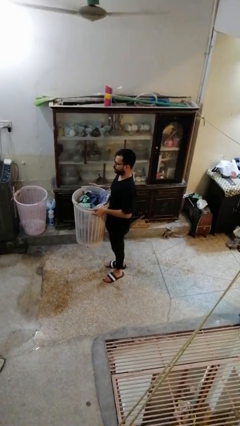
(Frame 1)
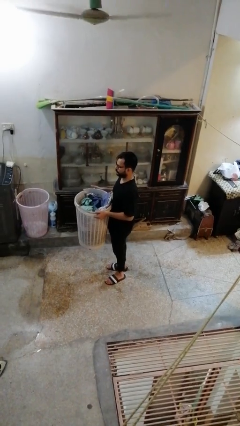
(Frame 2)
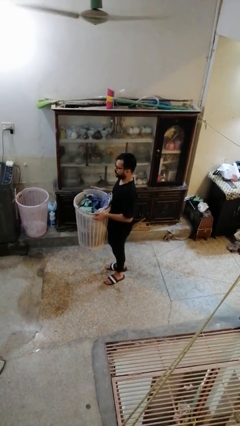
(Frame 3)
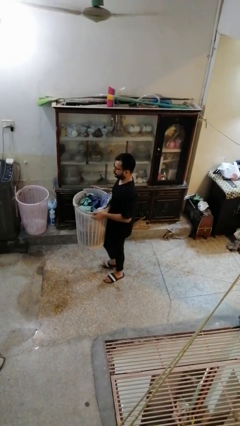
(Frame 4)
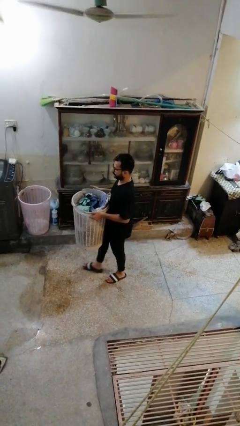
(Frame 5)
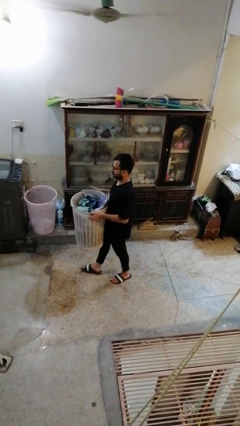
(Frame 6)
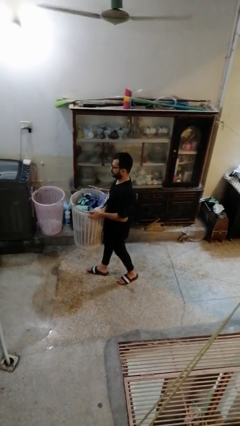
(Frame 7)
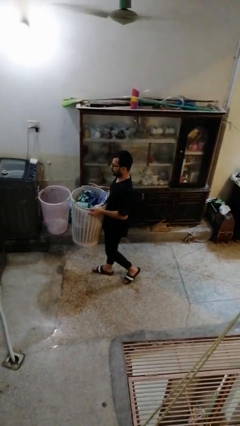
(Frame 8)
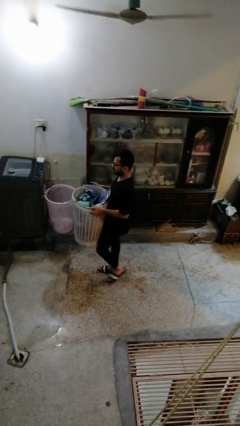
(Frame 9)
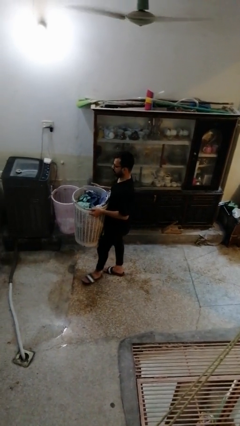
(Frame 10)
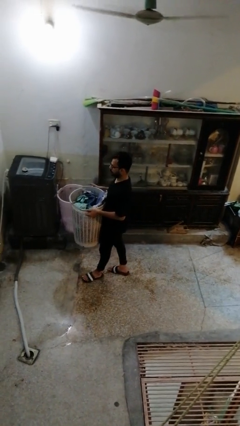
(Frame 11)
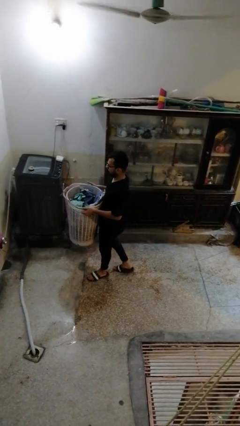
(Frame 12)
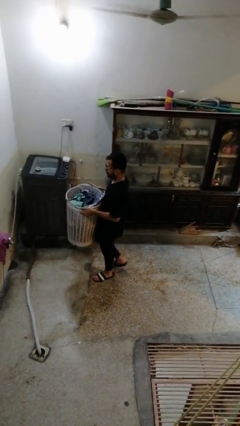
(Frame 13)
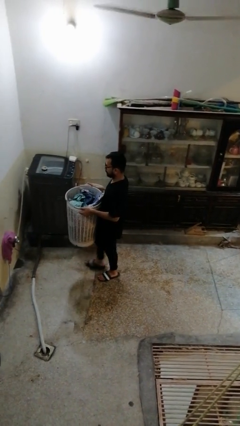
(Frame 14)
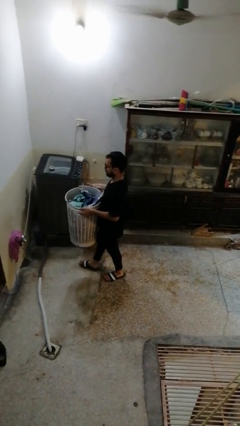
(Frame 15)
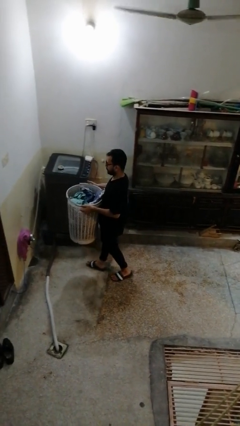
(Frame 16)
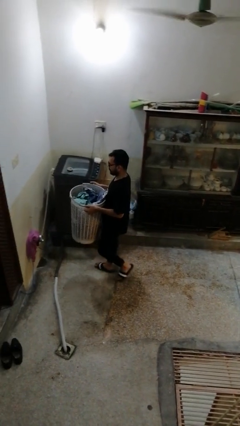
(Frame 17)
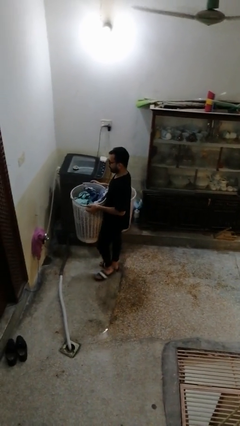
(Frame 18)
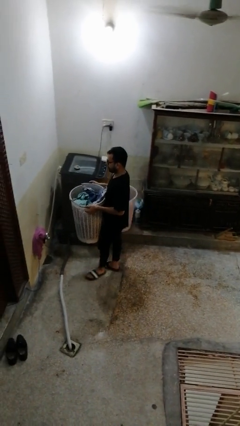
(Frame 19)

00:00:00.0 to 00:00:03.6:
person carries laundry basket

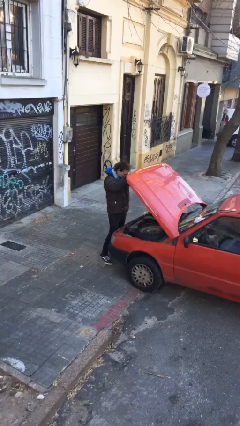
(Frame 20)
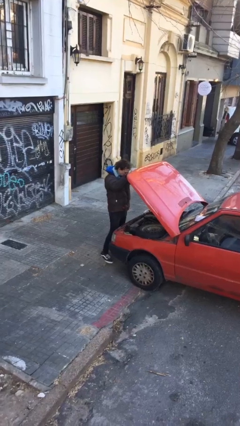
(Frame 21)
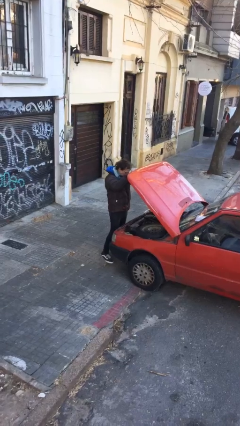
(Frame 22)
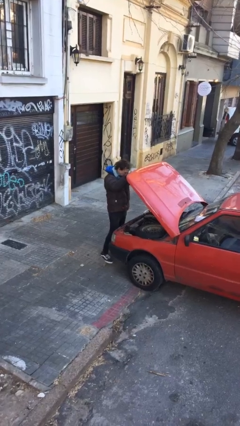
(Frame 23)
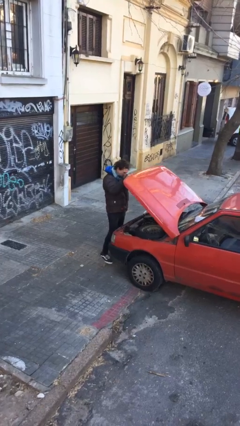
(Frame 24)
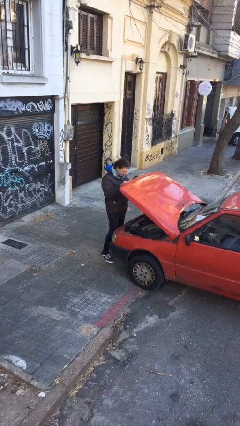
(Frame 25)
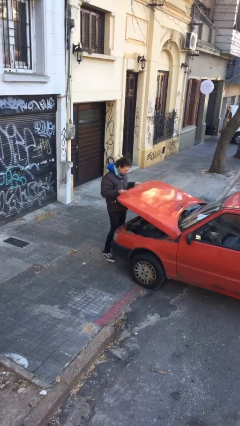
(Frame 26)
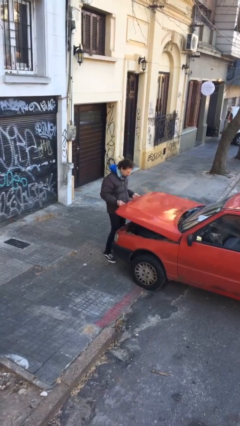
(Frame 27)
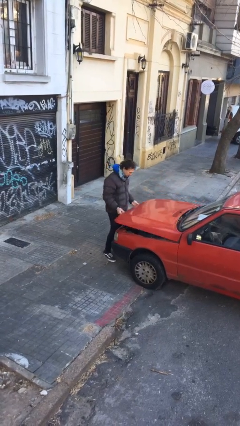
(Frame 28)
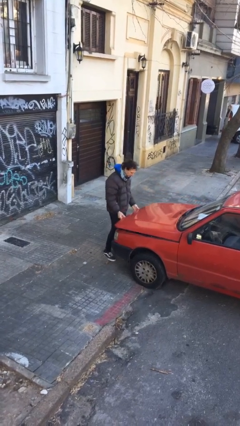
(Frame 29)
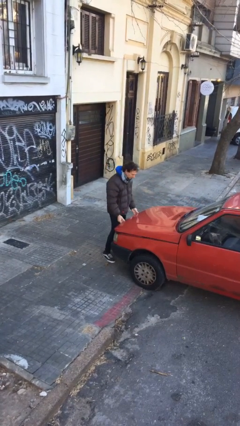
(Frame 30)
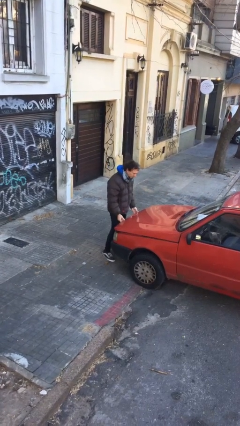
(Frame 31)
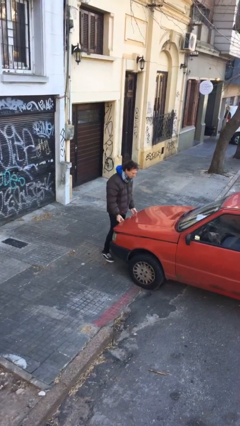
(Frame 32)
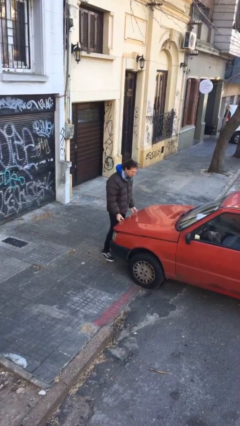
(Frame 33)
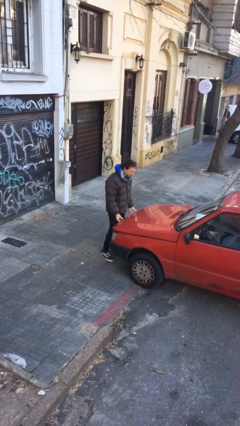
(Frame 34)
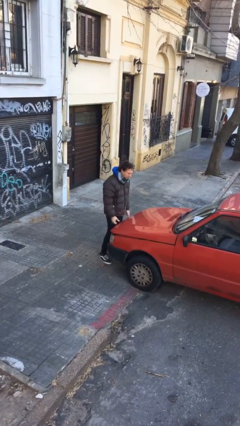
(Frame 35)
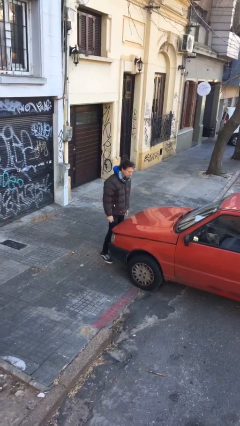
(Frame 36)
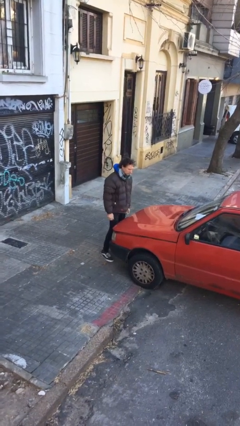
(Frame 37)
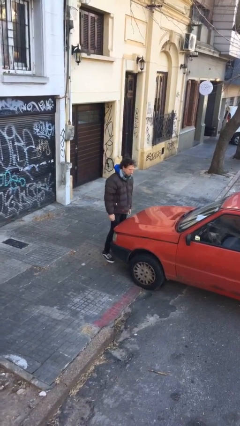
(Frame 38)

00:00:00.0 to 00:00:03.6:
person closes car hood

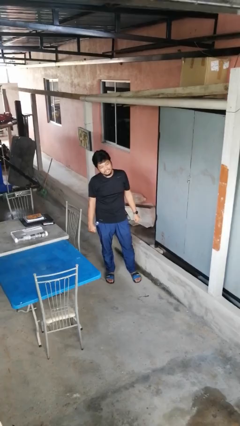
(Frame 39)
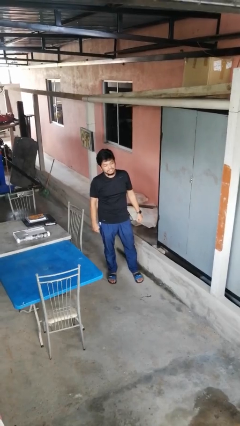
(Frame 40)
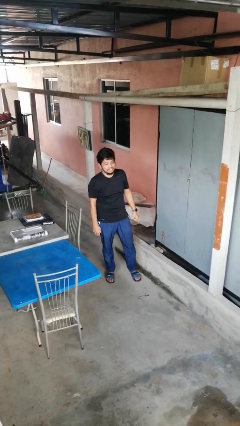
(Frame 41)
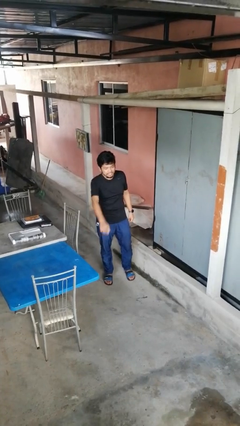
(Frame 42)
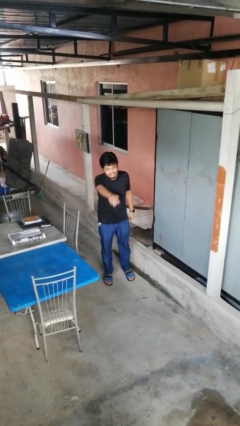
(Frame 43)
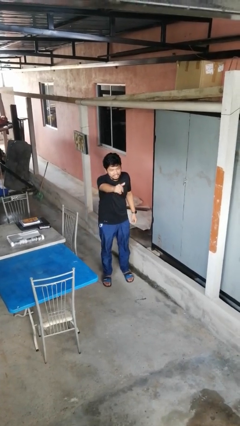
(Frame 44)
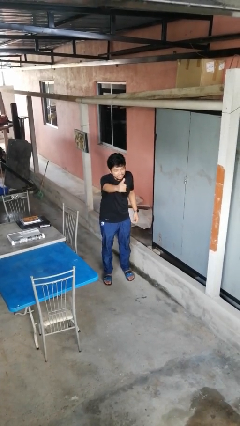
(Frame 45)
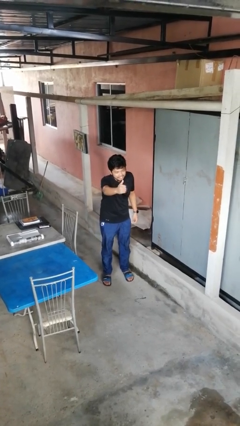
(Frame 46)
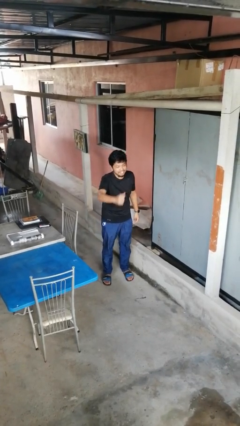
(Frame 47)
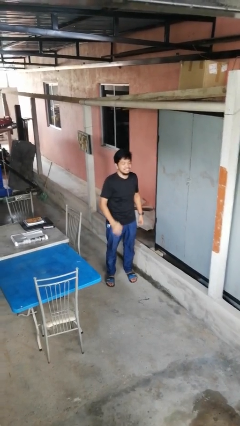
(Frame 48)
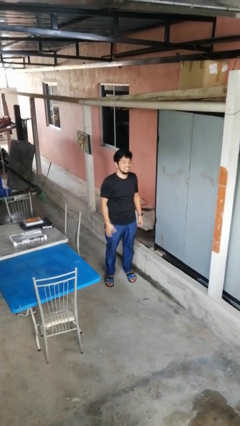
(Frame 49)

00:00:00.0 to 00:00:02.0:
person gestures come here

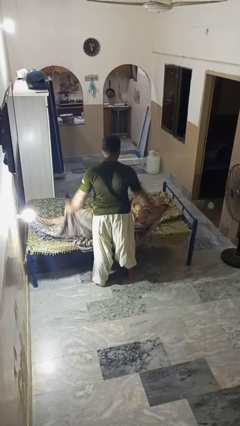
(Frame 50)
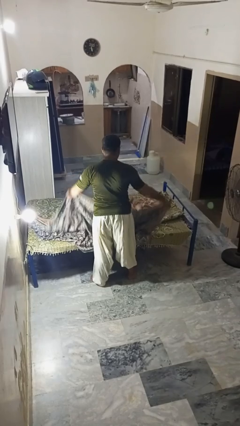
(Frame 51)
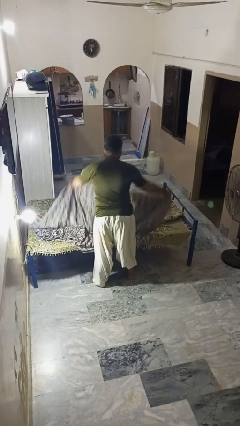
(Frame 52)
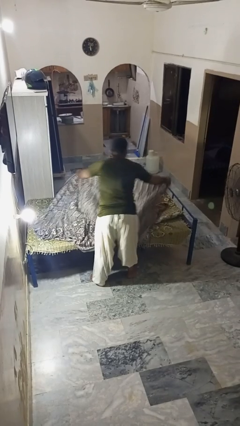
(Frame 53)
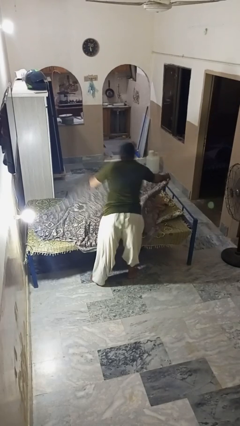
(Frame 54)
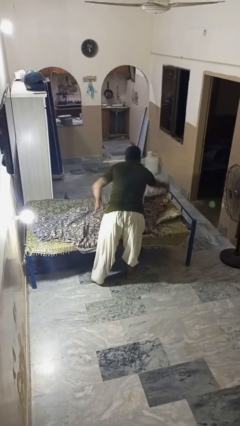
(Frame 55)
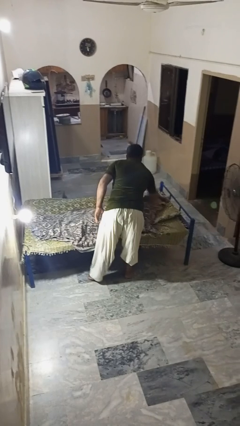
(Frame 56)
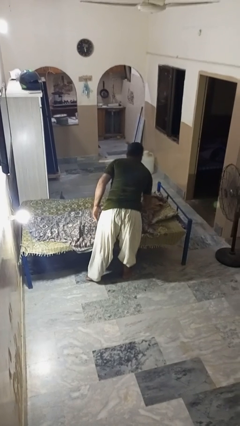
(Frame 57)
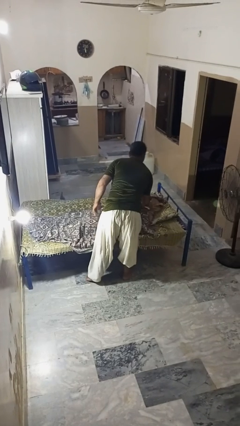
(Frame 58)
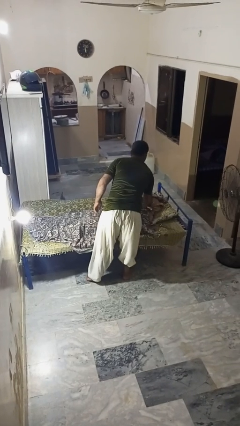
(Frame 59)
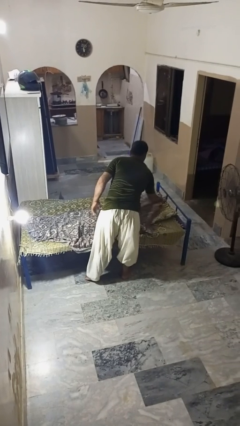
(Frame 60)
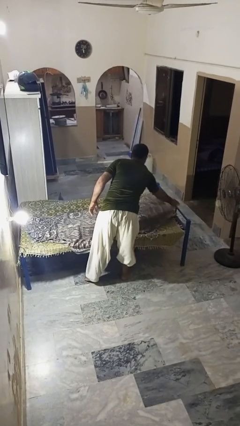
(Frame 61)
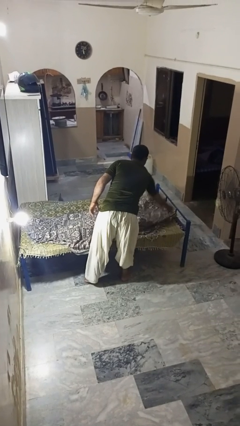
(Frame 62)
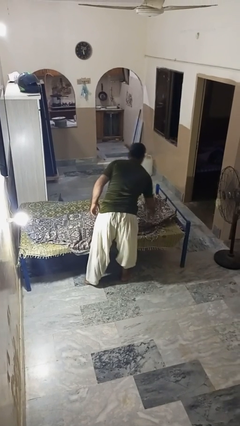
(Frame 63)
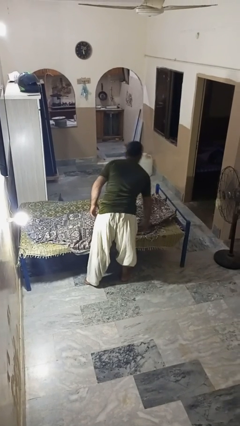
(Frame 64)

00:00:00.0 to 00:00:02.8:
person covers friend with blanket

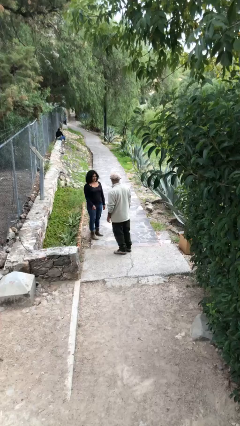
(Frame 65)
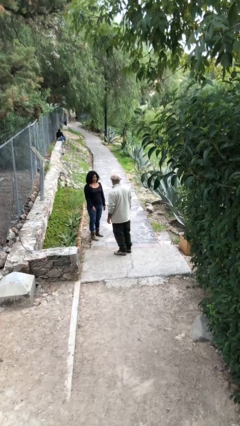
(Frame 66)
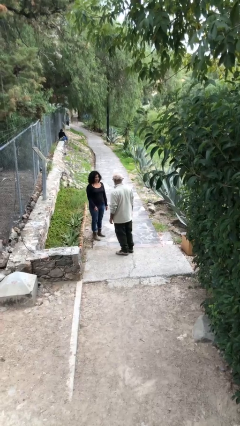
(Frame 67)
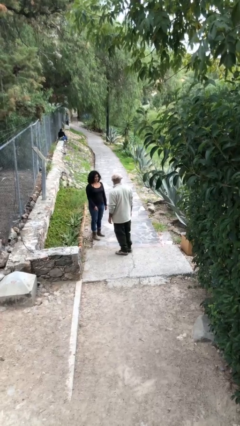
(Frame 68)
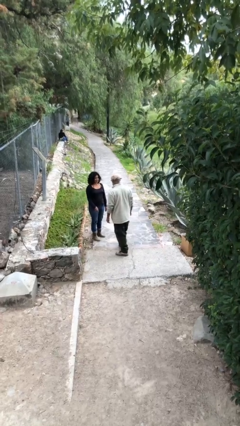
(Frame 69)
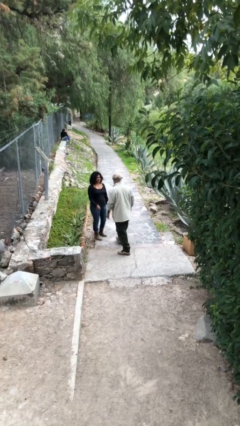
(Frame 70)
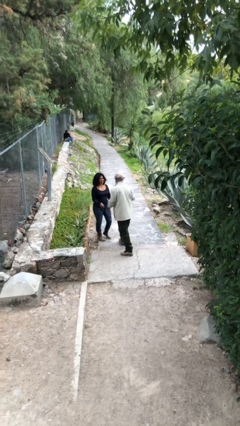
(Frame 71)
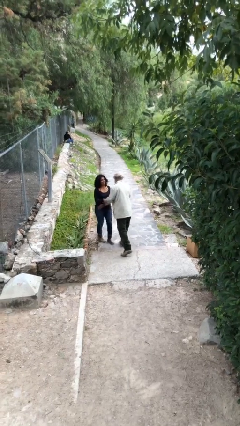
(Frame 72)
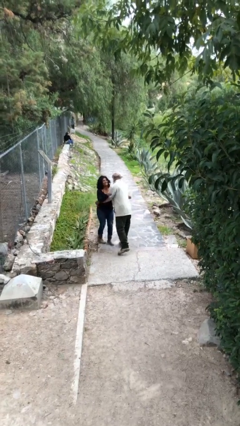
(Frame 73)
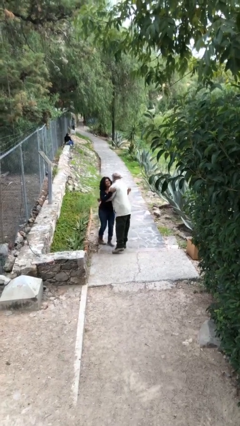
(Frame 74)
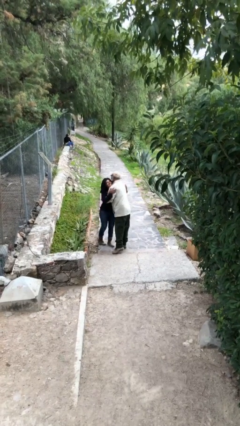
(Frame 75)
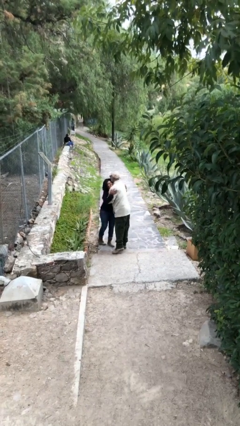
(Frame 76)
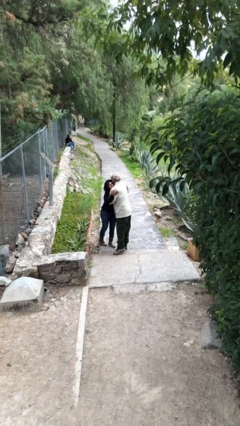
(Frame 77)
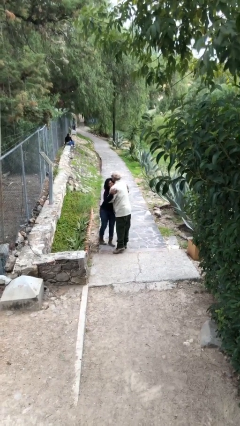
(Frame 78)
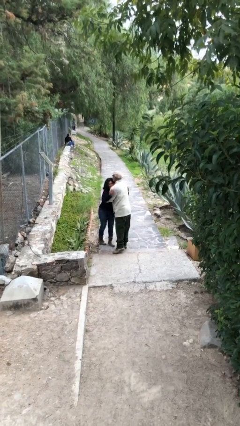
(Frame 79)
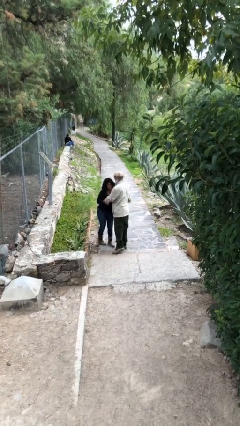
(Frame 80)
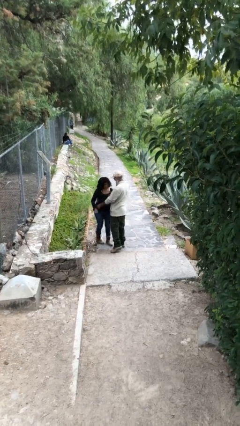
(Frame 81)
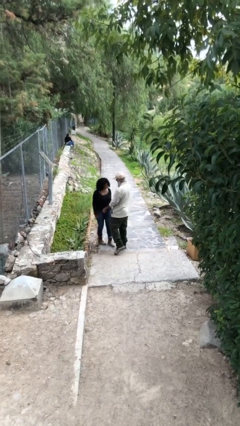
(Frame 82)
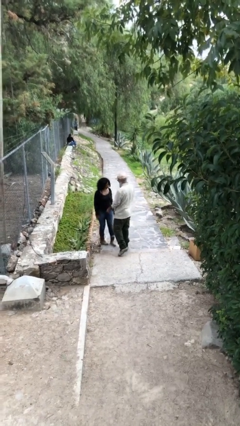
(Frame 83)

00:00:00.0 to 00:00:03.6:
person embraces person

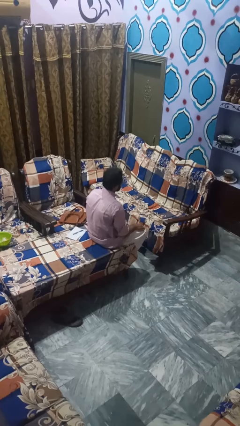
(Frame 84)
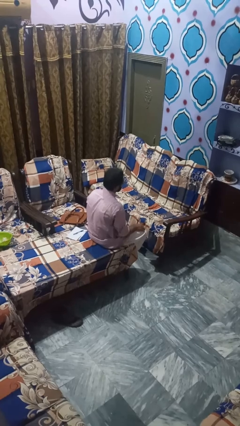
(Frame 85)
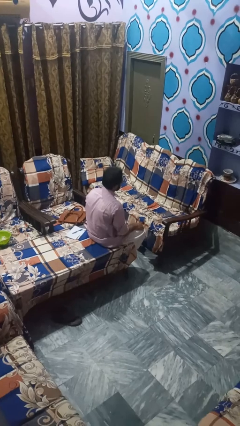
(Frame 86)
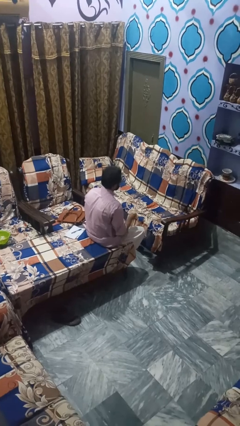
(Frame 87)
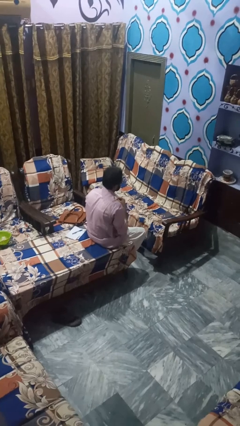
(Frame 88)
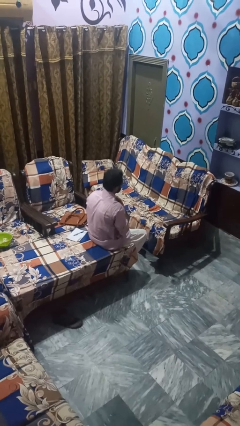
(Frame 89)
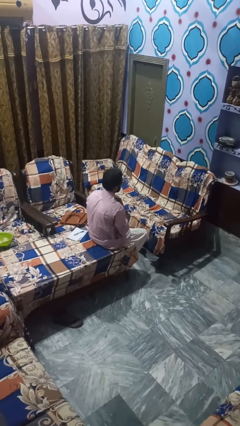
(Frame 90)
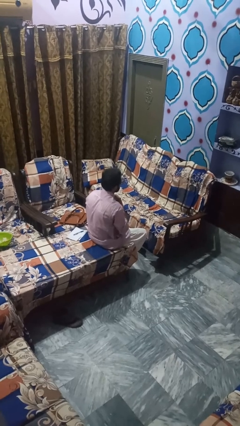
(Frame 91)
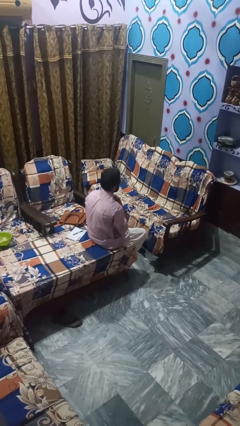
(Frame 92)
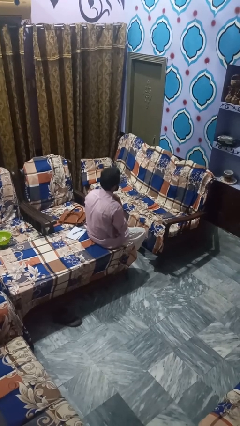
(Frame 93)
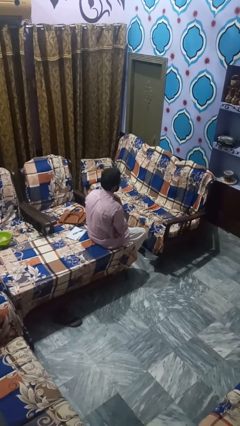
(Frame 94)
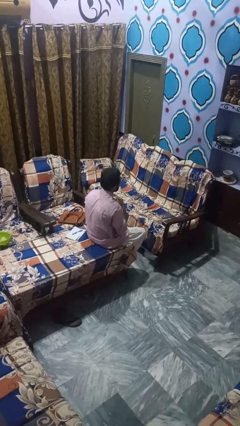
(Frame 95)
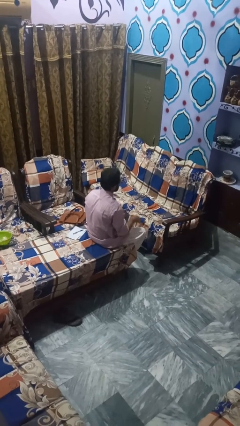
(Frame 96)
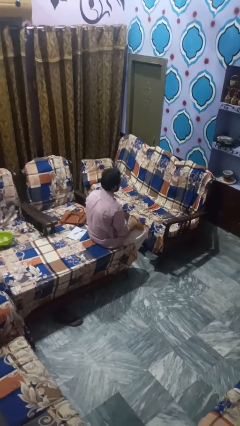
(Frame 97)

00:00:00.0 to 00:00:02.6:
person unbuttons shirt
